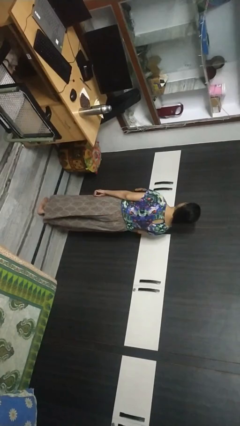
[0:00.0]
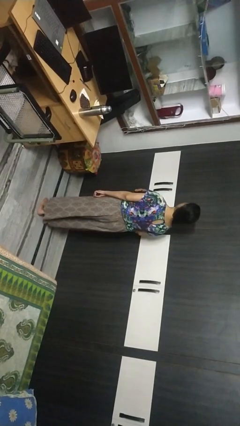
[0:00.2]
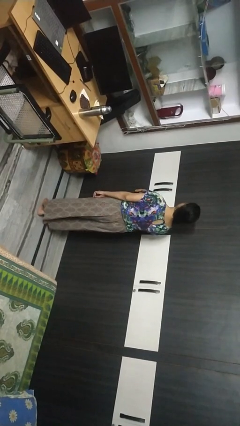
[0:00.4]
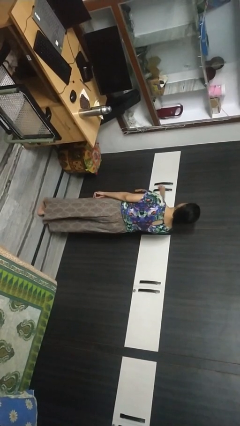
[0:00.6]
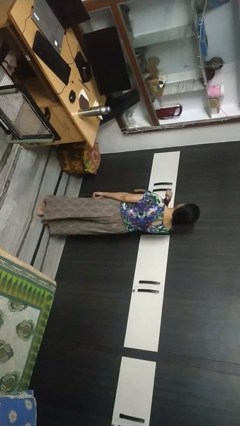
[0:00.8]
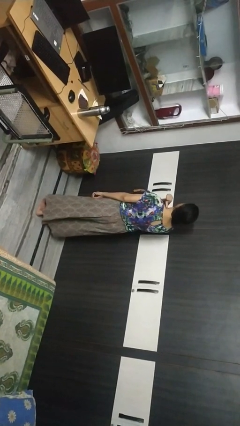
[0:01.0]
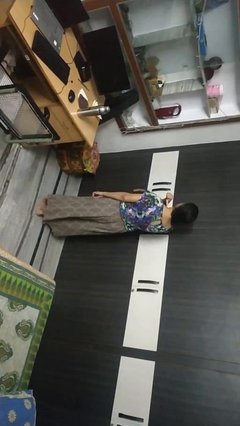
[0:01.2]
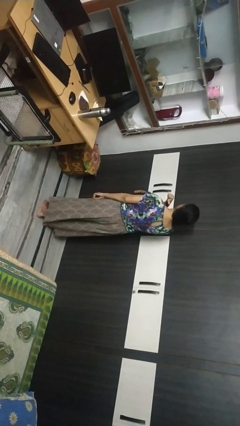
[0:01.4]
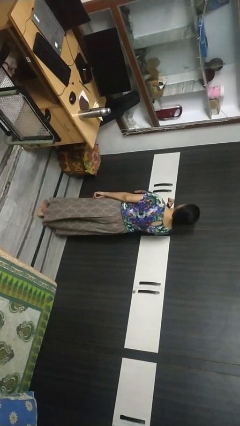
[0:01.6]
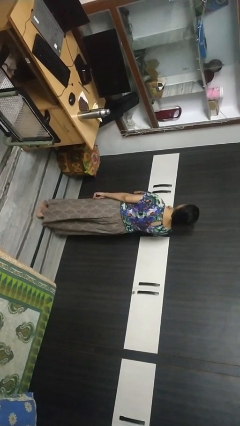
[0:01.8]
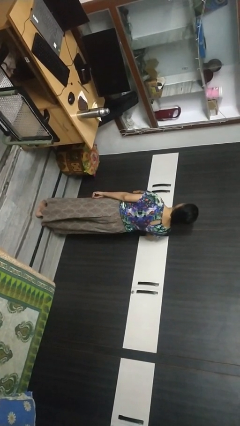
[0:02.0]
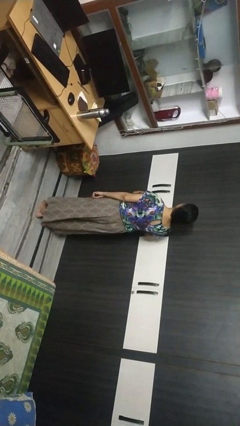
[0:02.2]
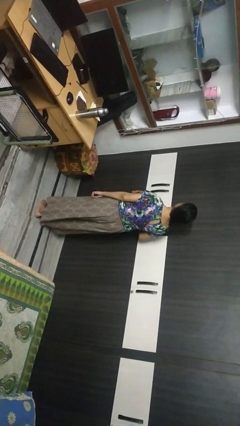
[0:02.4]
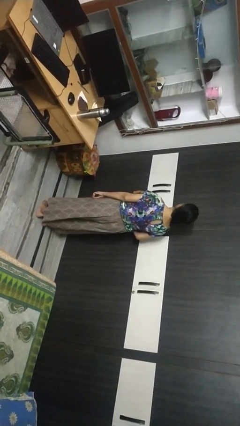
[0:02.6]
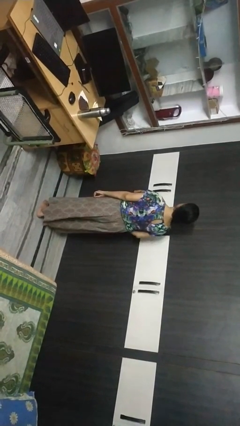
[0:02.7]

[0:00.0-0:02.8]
person gestures cut

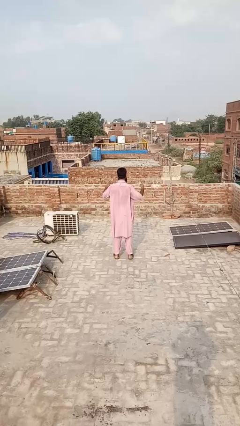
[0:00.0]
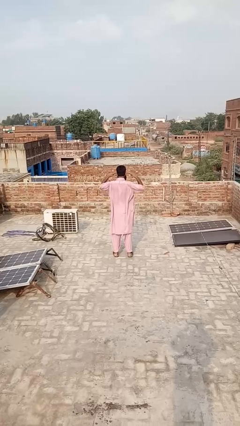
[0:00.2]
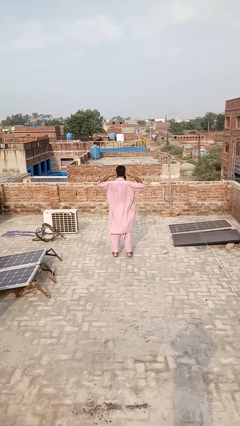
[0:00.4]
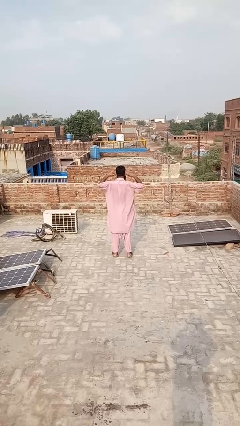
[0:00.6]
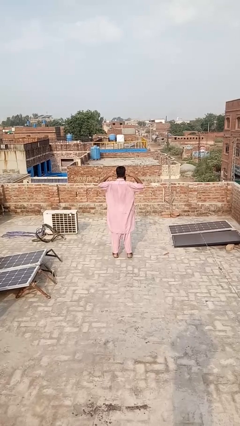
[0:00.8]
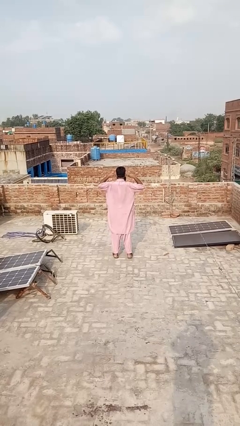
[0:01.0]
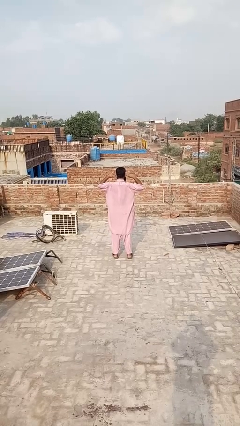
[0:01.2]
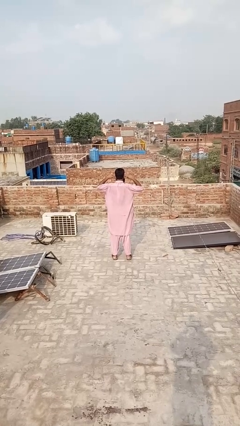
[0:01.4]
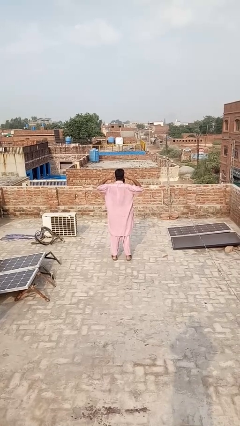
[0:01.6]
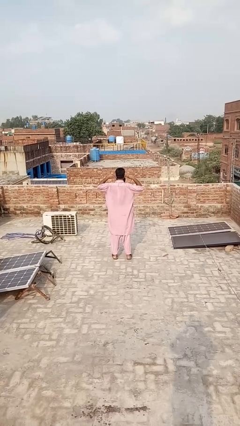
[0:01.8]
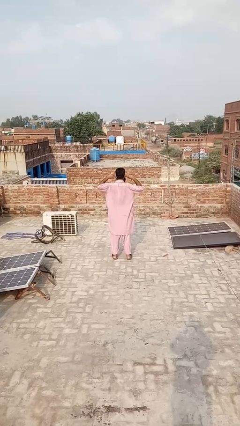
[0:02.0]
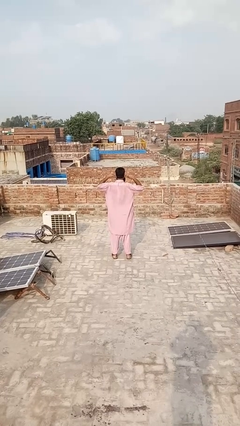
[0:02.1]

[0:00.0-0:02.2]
person puts fingers in ear

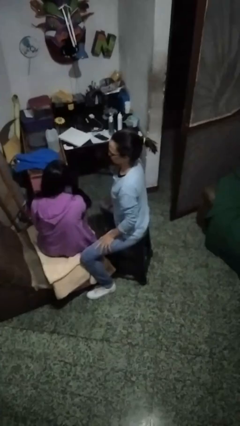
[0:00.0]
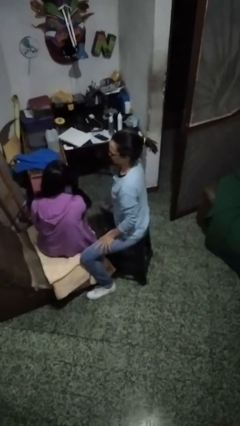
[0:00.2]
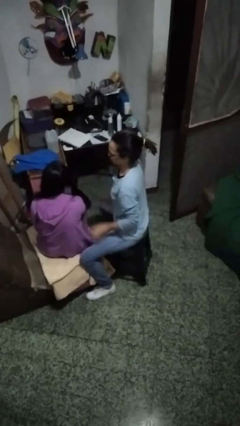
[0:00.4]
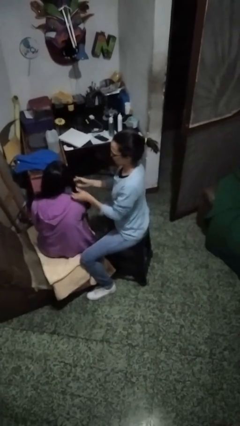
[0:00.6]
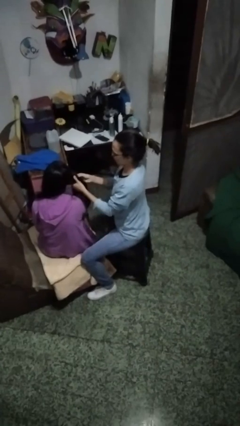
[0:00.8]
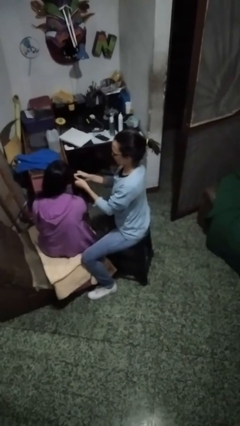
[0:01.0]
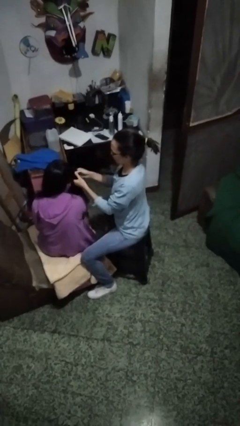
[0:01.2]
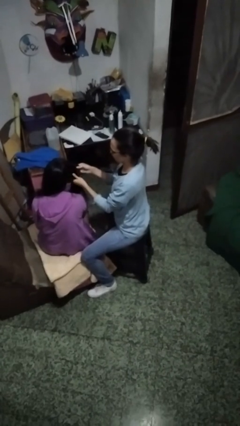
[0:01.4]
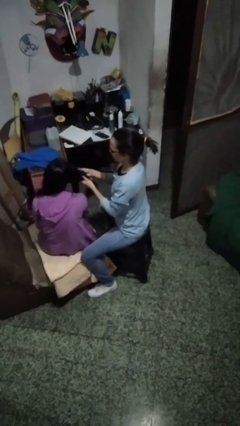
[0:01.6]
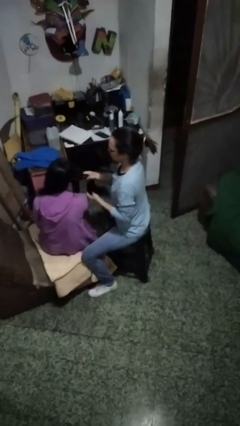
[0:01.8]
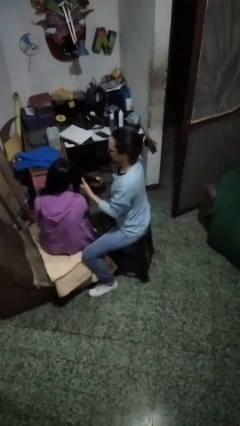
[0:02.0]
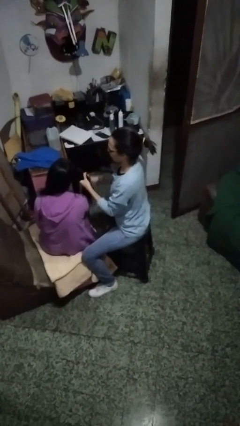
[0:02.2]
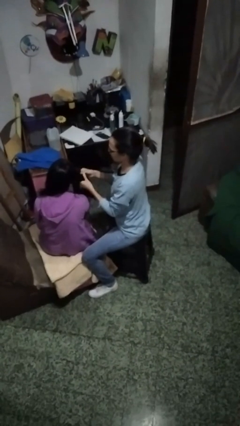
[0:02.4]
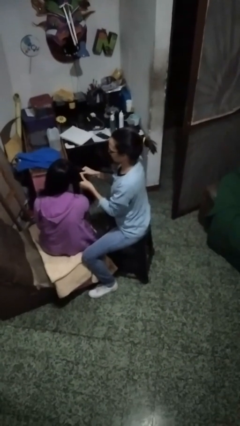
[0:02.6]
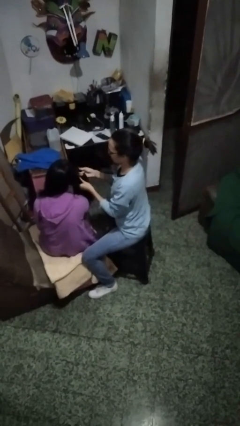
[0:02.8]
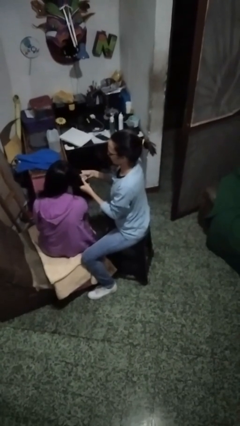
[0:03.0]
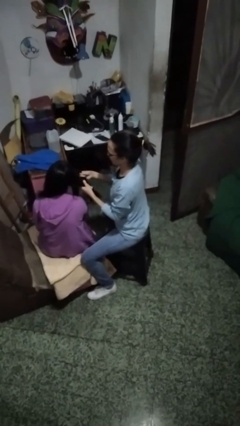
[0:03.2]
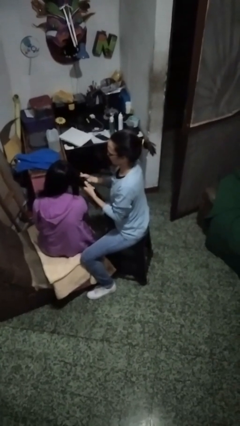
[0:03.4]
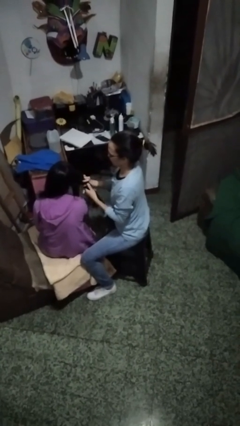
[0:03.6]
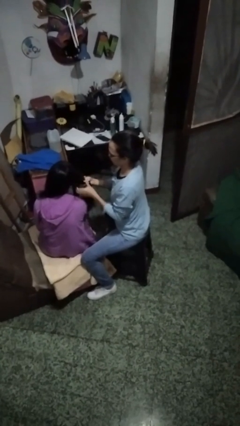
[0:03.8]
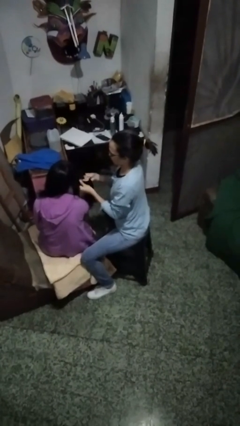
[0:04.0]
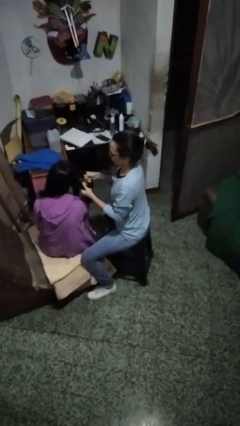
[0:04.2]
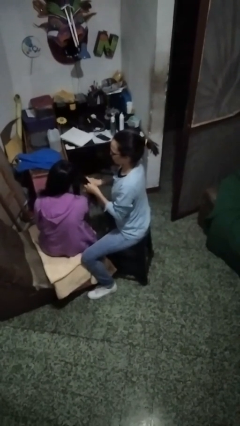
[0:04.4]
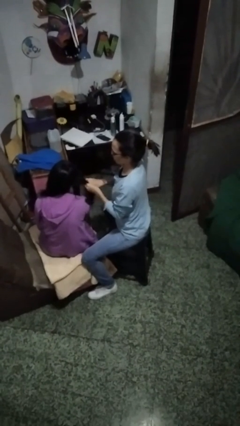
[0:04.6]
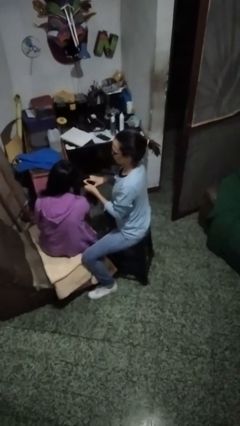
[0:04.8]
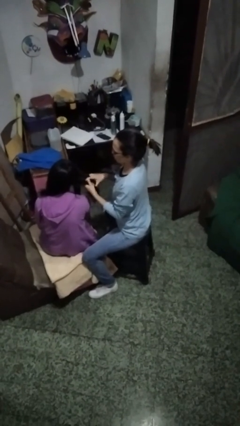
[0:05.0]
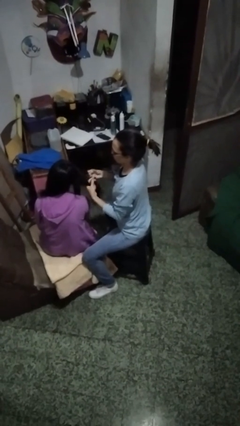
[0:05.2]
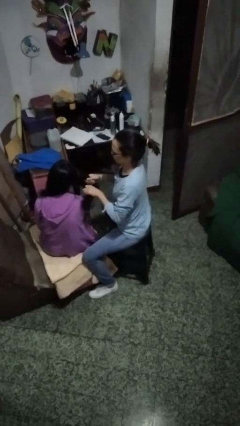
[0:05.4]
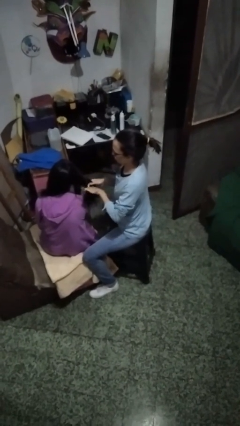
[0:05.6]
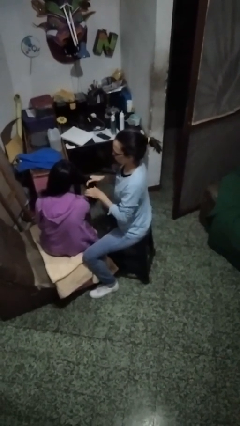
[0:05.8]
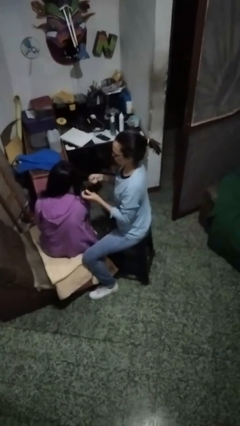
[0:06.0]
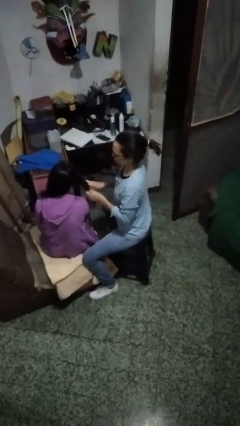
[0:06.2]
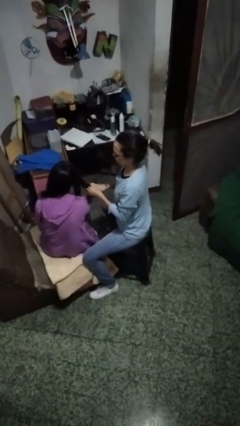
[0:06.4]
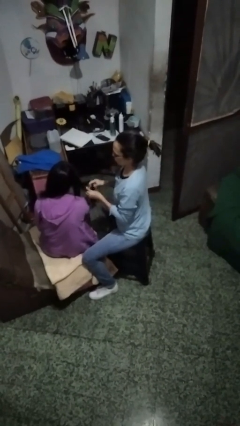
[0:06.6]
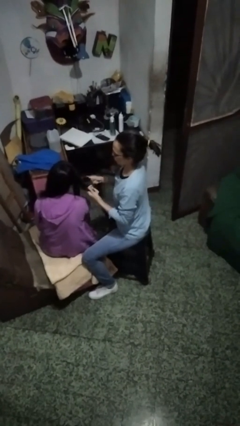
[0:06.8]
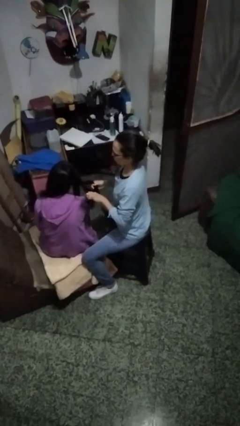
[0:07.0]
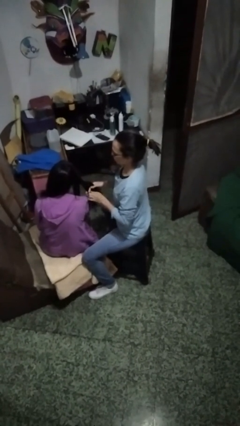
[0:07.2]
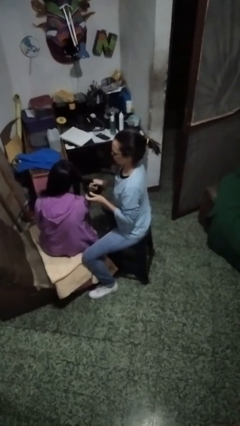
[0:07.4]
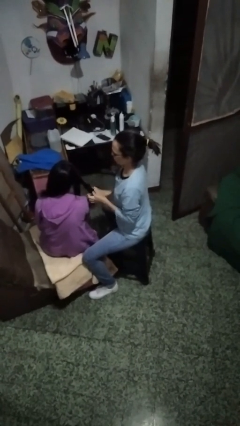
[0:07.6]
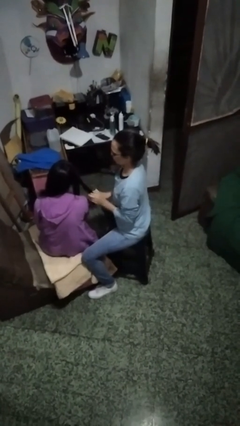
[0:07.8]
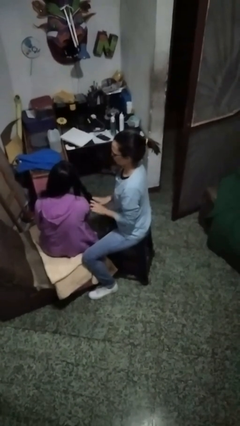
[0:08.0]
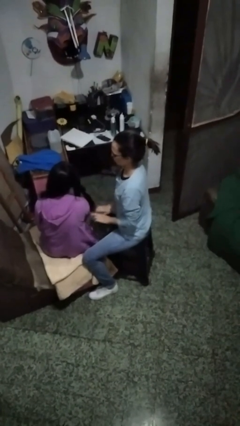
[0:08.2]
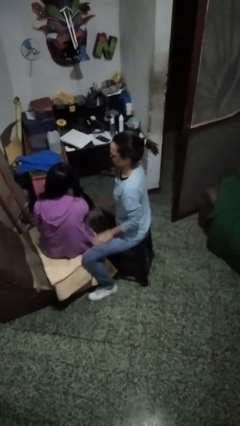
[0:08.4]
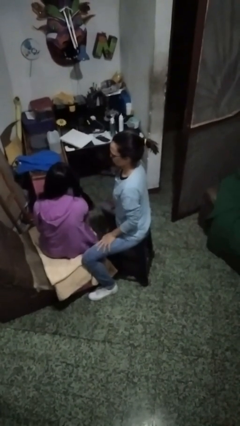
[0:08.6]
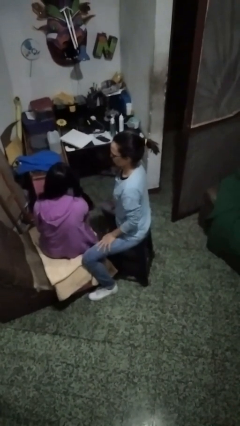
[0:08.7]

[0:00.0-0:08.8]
person braids hair of person

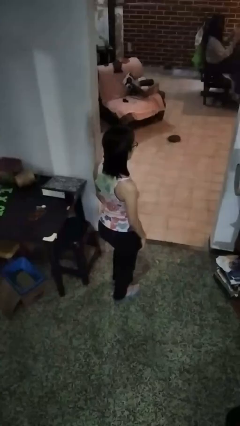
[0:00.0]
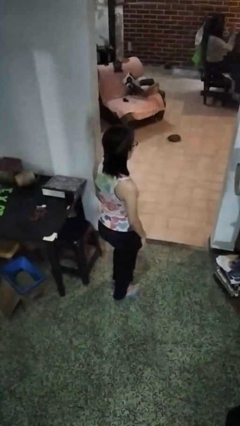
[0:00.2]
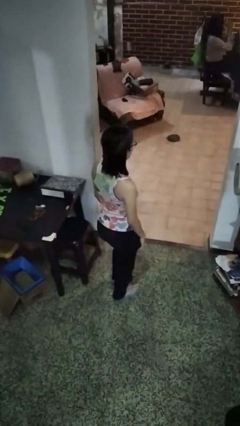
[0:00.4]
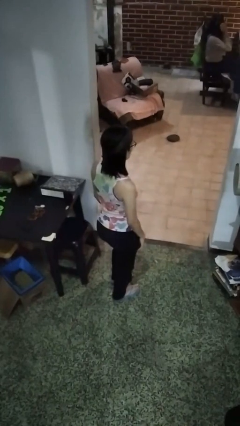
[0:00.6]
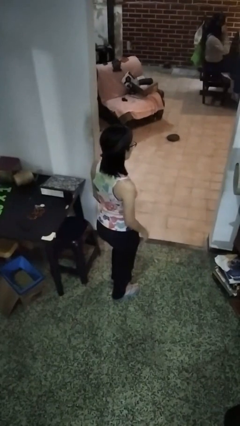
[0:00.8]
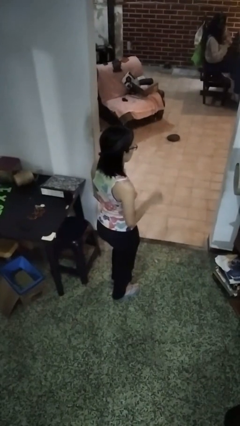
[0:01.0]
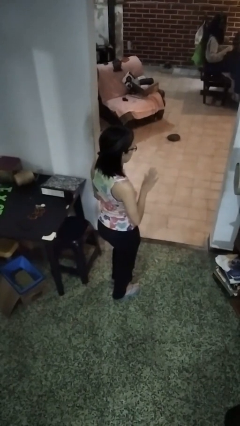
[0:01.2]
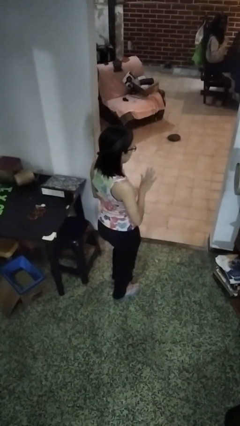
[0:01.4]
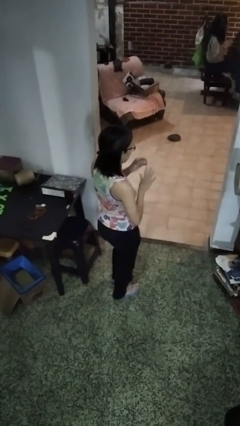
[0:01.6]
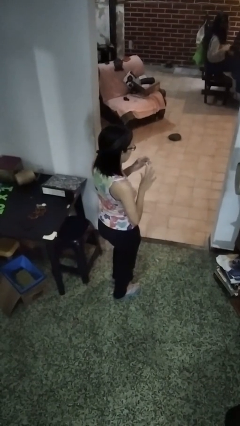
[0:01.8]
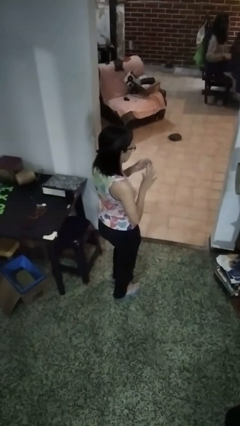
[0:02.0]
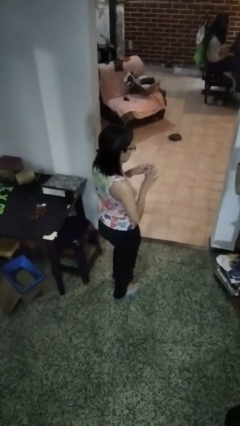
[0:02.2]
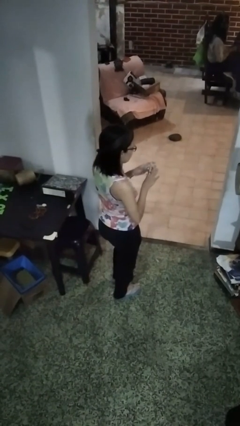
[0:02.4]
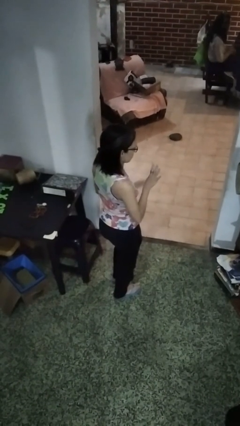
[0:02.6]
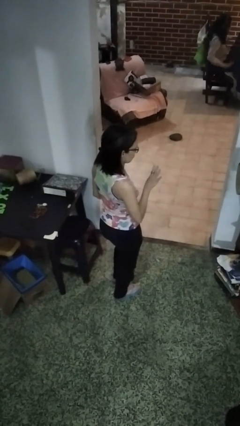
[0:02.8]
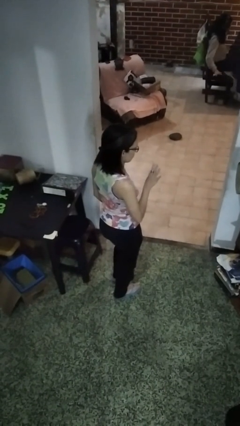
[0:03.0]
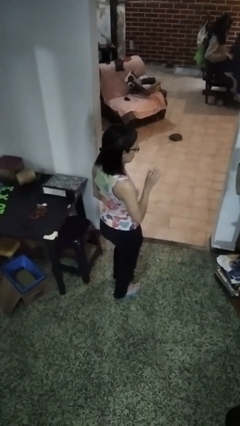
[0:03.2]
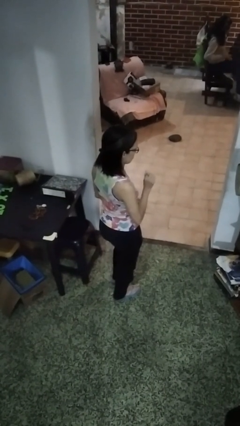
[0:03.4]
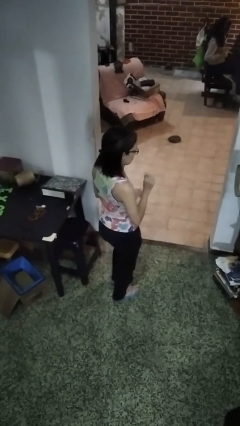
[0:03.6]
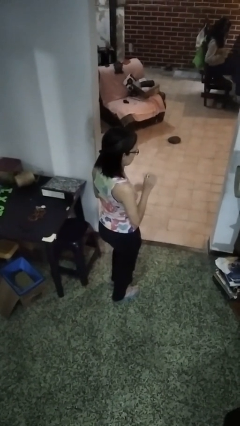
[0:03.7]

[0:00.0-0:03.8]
person puts on ring
